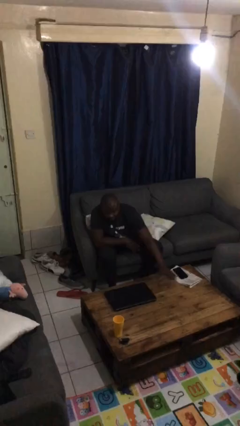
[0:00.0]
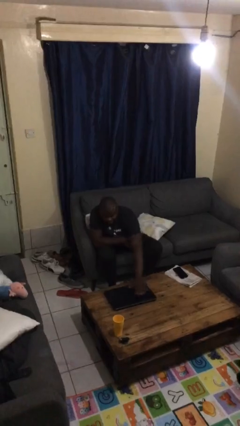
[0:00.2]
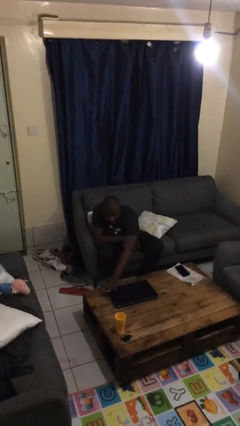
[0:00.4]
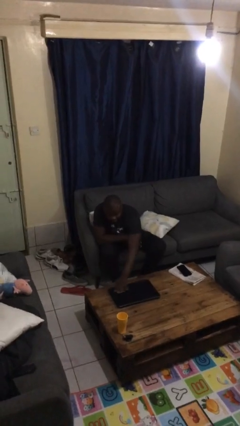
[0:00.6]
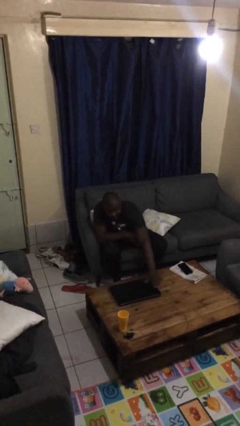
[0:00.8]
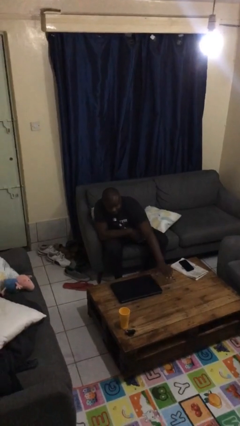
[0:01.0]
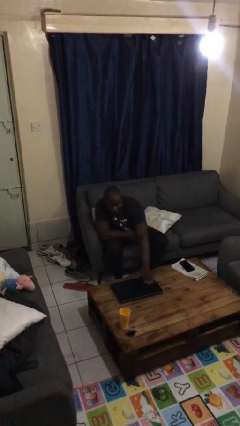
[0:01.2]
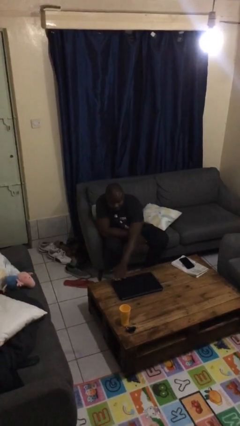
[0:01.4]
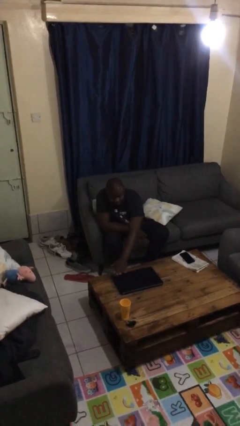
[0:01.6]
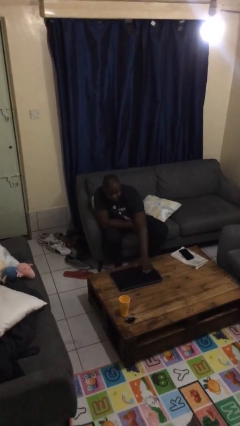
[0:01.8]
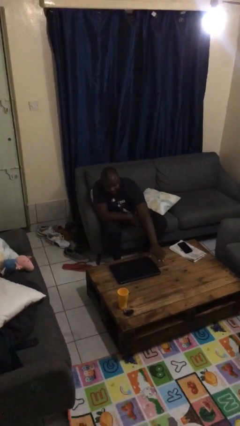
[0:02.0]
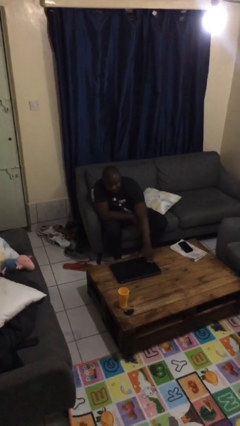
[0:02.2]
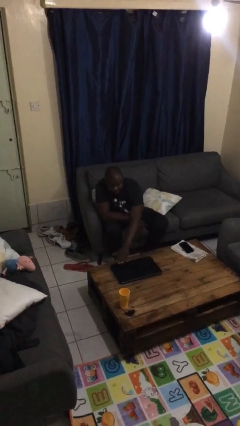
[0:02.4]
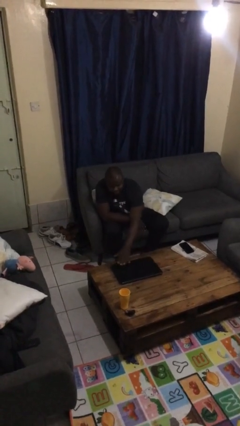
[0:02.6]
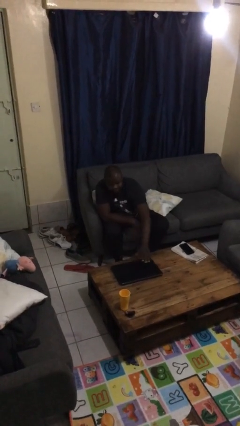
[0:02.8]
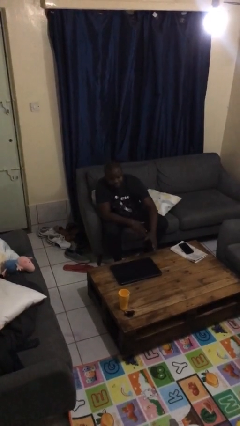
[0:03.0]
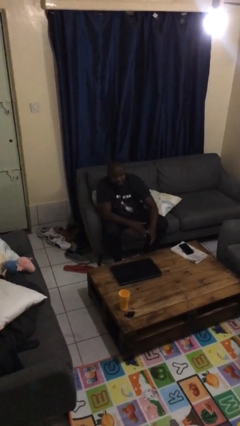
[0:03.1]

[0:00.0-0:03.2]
person waves hand over object

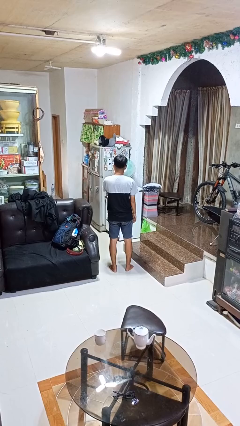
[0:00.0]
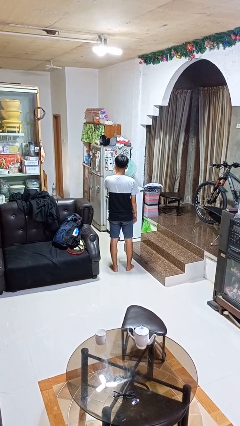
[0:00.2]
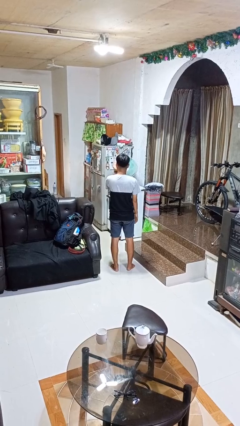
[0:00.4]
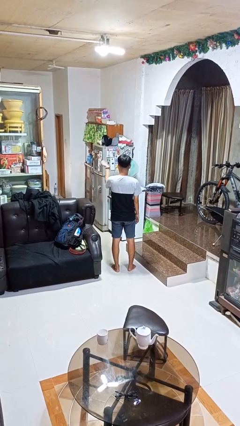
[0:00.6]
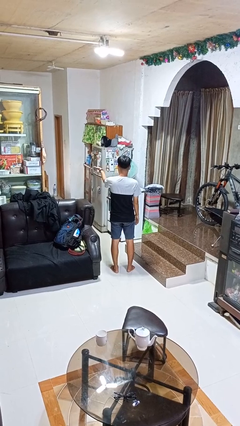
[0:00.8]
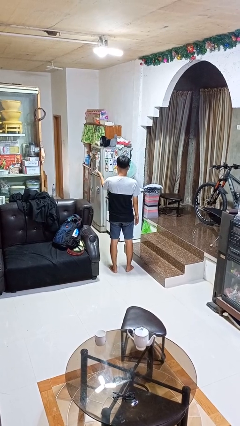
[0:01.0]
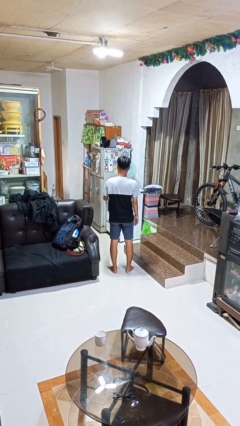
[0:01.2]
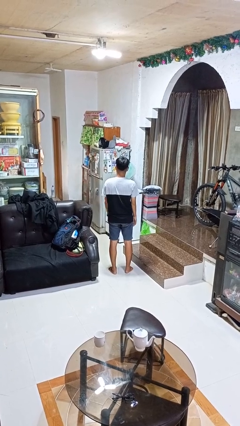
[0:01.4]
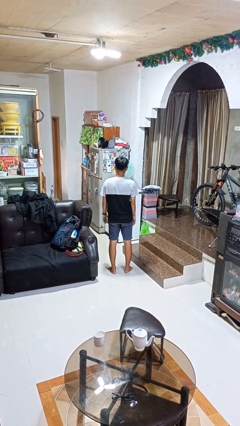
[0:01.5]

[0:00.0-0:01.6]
person gestures blow kiss

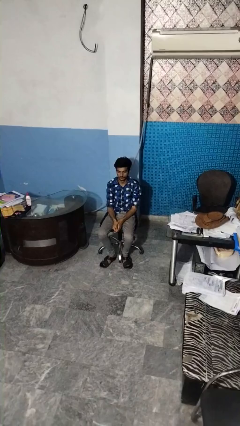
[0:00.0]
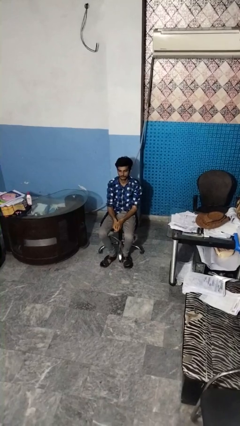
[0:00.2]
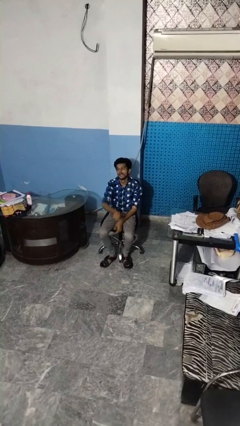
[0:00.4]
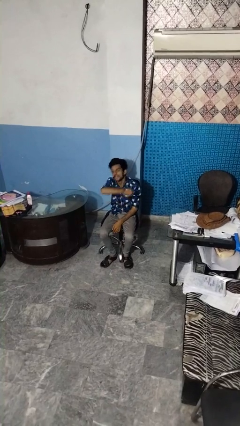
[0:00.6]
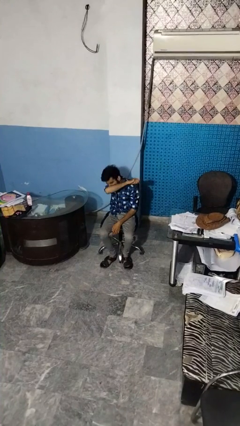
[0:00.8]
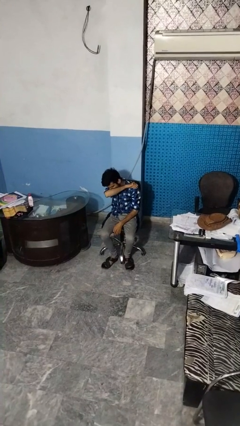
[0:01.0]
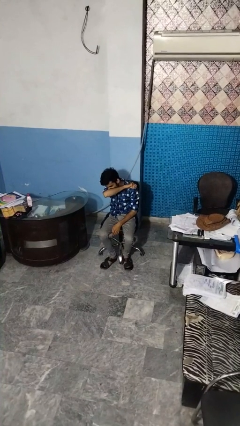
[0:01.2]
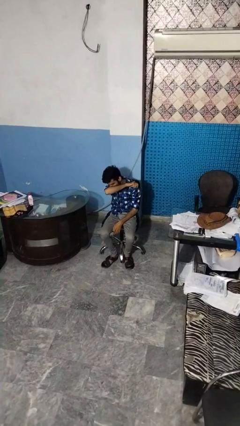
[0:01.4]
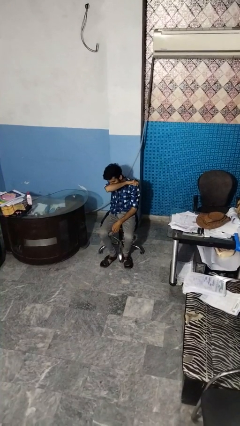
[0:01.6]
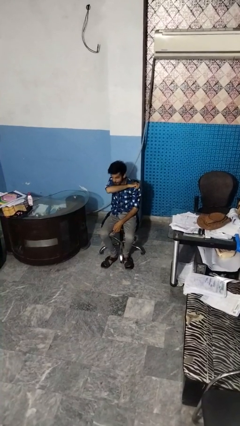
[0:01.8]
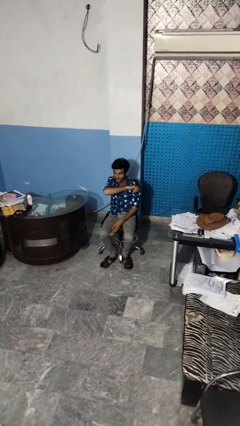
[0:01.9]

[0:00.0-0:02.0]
person sneezes into arm

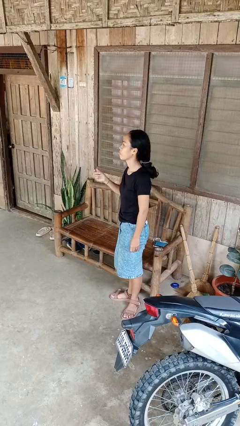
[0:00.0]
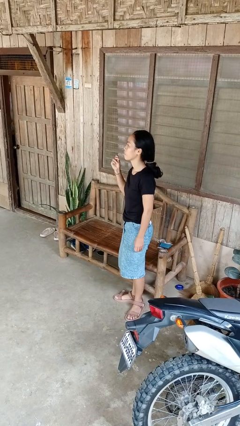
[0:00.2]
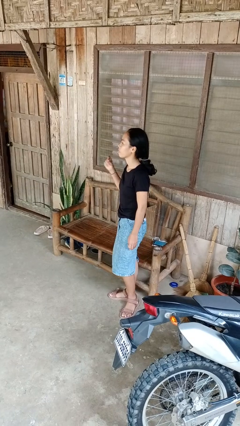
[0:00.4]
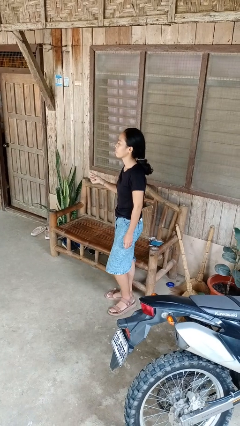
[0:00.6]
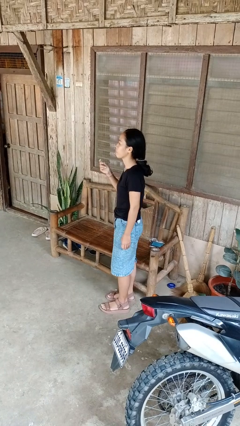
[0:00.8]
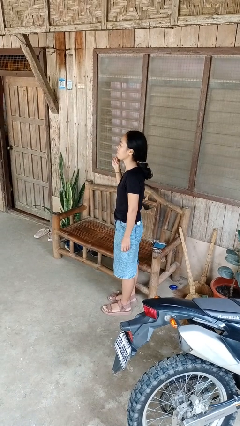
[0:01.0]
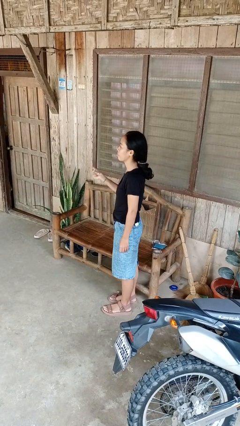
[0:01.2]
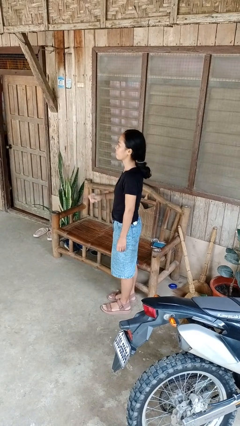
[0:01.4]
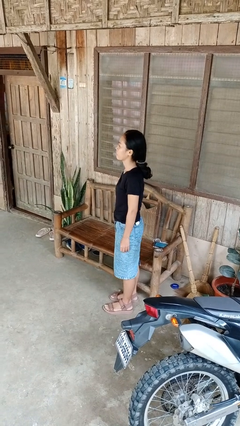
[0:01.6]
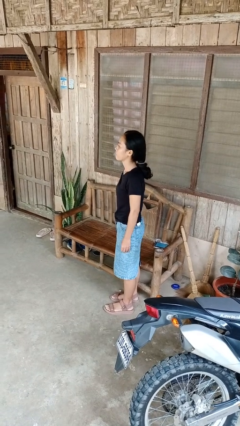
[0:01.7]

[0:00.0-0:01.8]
person snaps fingers

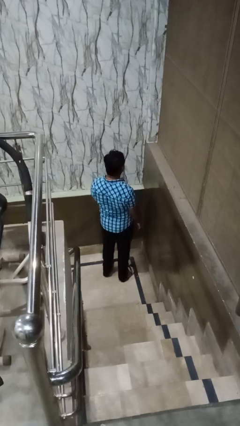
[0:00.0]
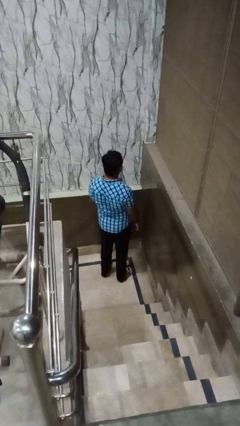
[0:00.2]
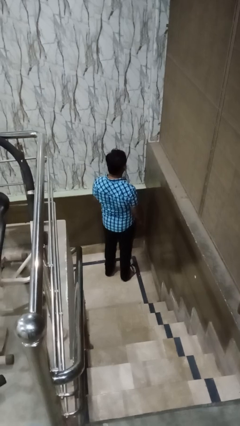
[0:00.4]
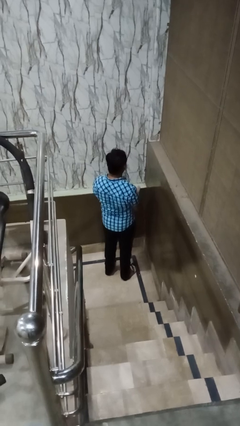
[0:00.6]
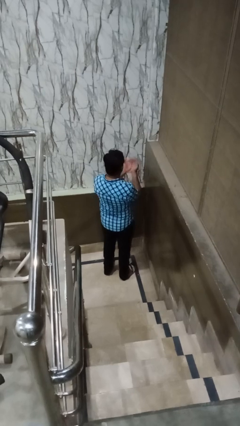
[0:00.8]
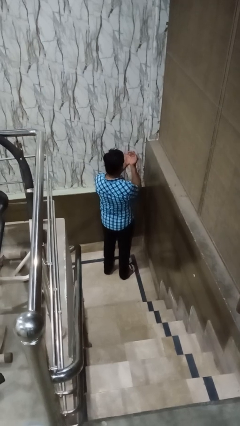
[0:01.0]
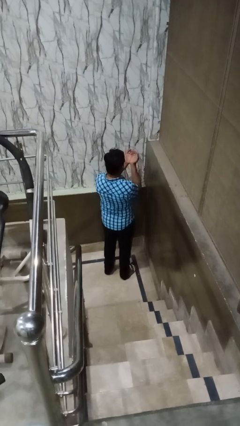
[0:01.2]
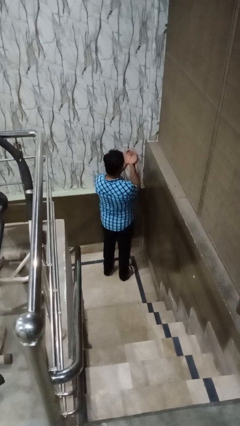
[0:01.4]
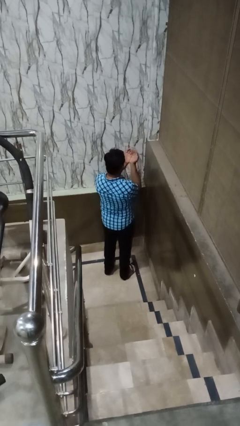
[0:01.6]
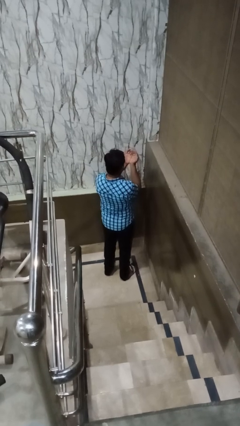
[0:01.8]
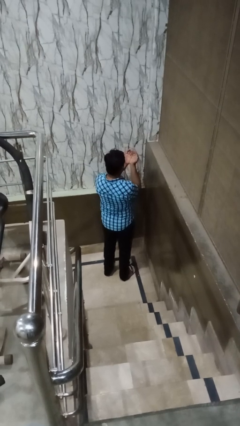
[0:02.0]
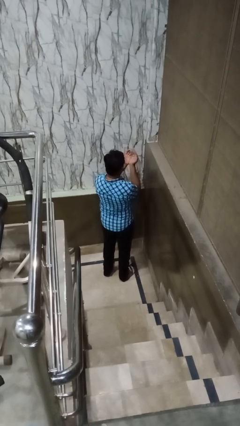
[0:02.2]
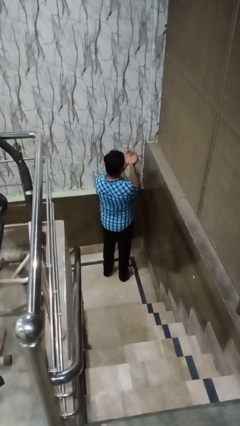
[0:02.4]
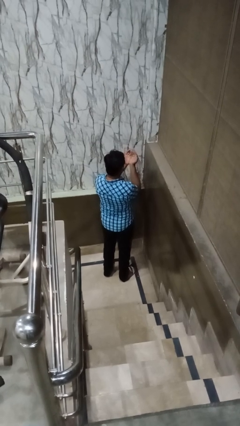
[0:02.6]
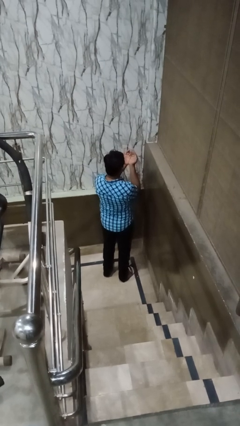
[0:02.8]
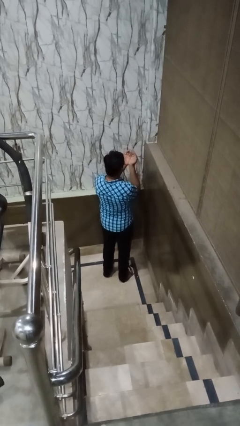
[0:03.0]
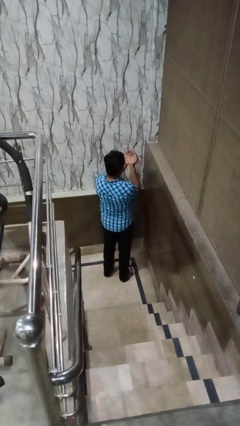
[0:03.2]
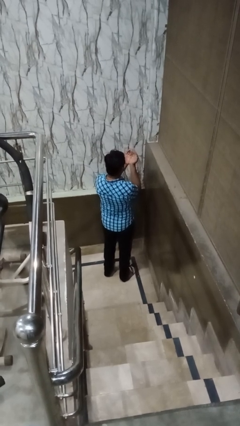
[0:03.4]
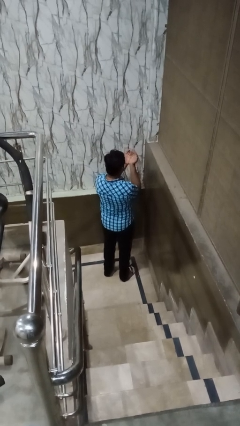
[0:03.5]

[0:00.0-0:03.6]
person prays

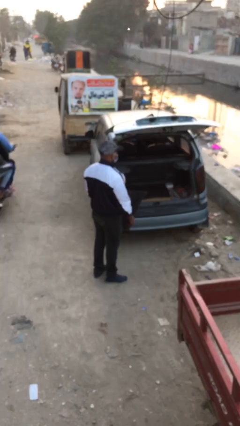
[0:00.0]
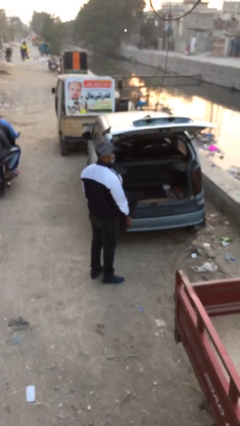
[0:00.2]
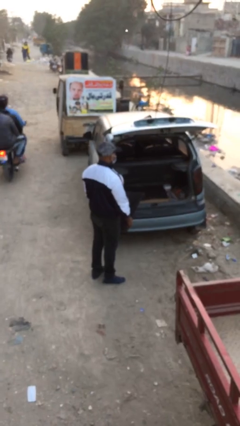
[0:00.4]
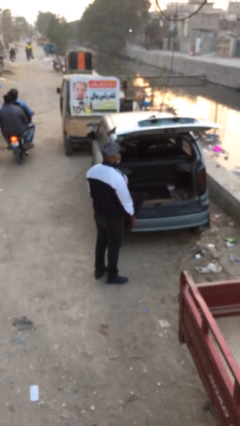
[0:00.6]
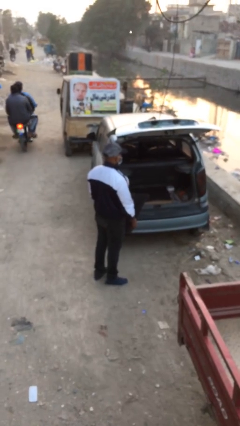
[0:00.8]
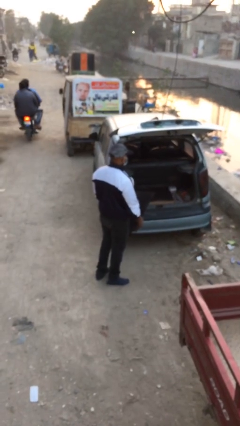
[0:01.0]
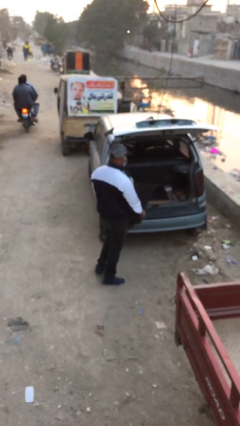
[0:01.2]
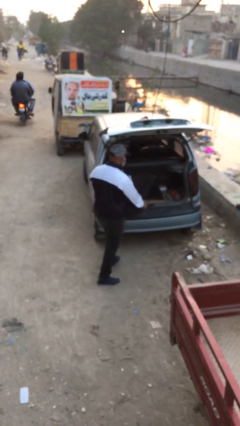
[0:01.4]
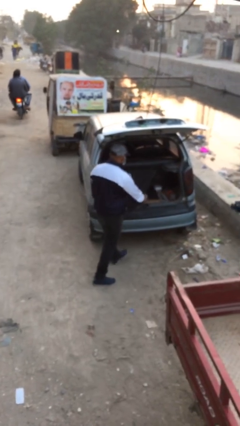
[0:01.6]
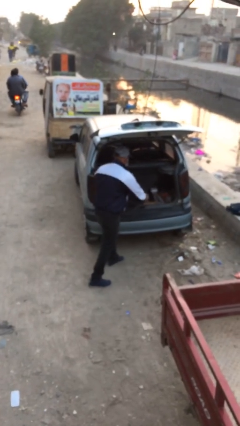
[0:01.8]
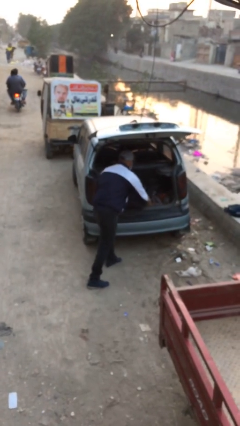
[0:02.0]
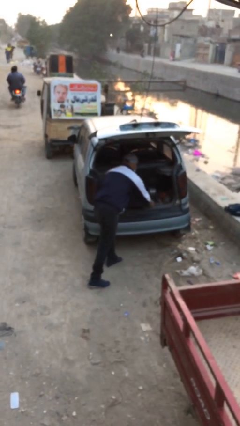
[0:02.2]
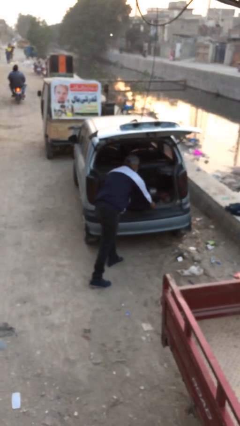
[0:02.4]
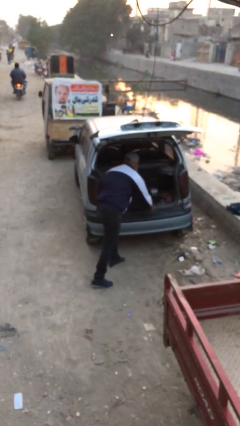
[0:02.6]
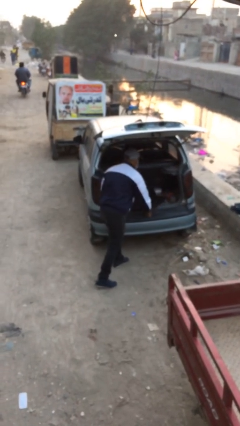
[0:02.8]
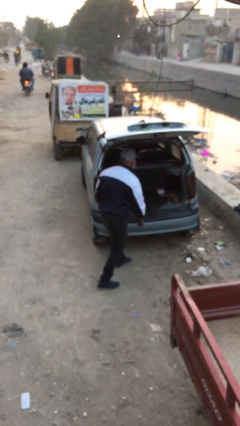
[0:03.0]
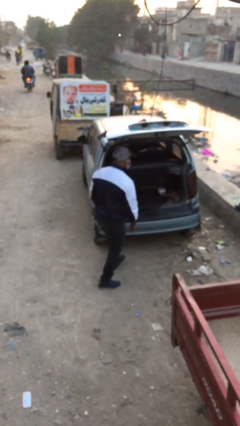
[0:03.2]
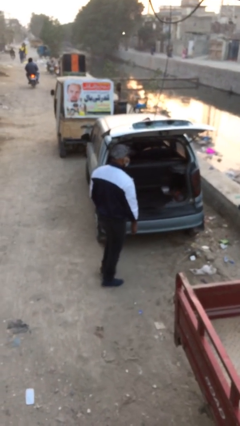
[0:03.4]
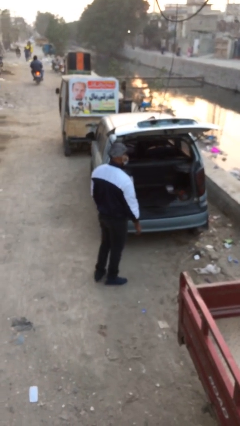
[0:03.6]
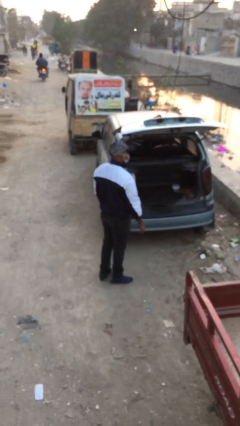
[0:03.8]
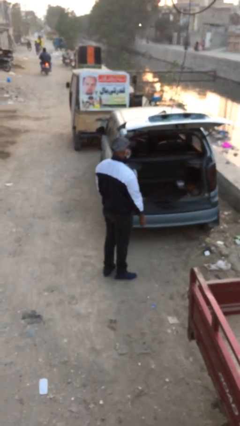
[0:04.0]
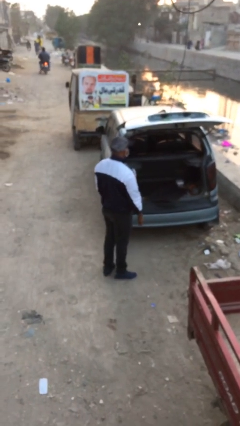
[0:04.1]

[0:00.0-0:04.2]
person loads car

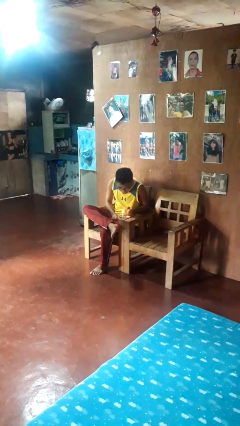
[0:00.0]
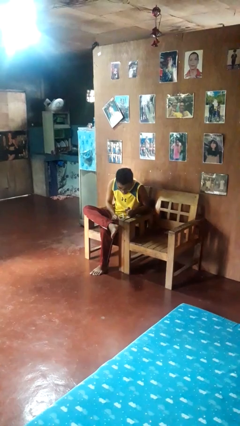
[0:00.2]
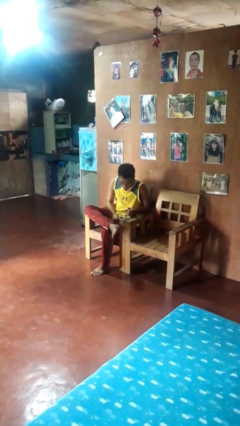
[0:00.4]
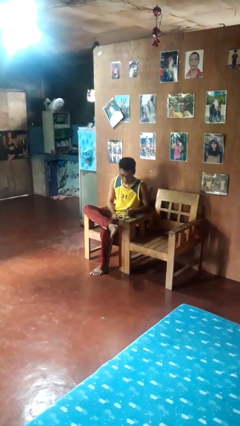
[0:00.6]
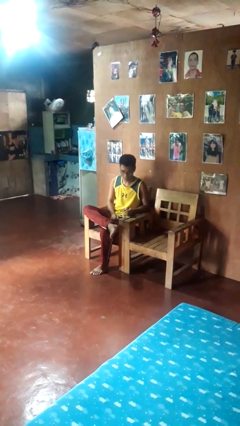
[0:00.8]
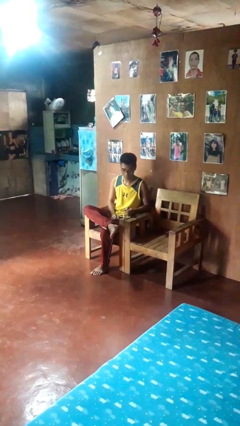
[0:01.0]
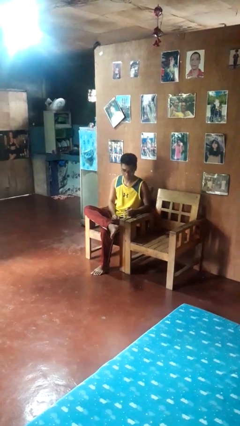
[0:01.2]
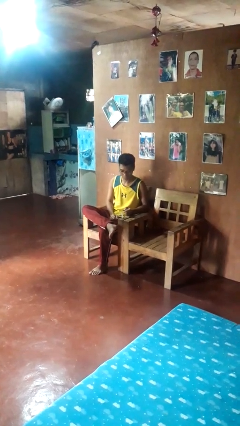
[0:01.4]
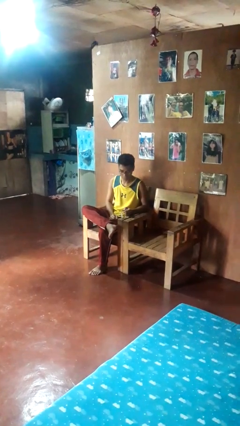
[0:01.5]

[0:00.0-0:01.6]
person extinguishes candle
